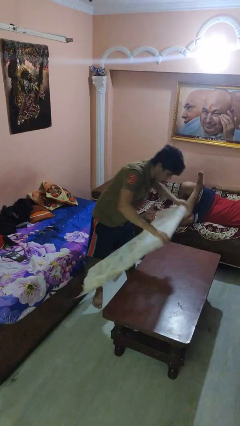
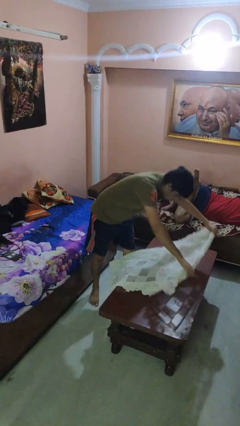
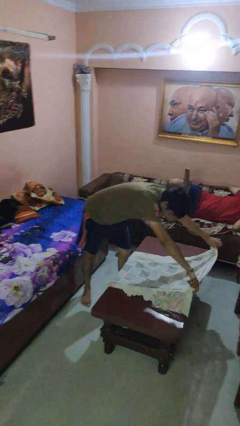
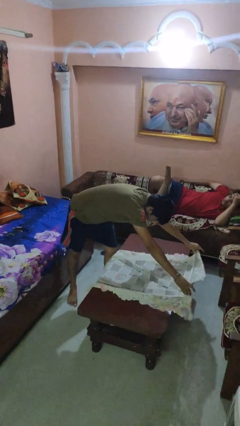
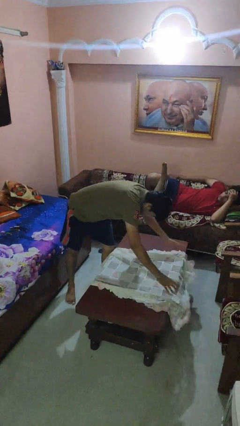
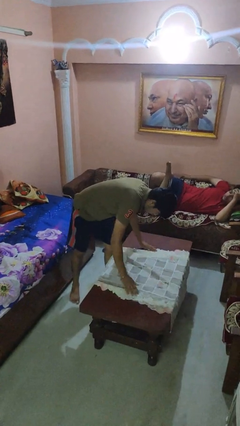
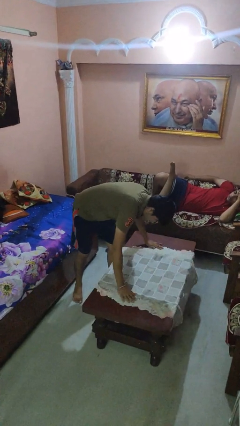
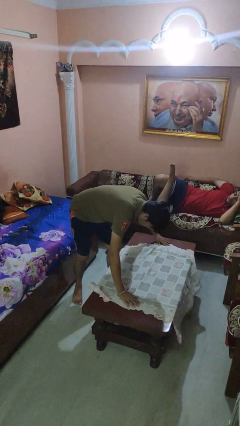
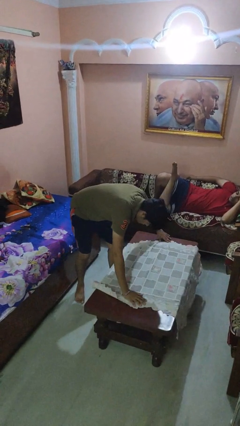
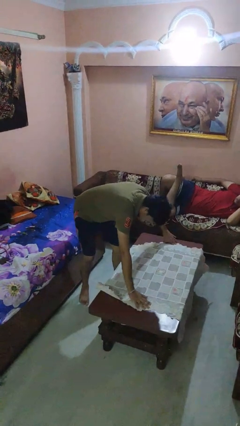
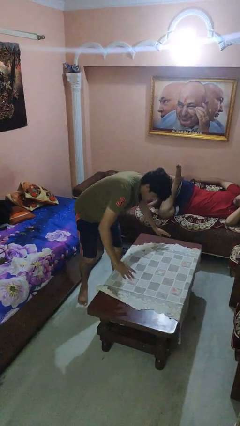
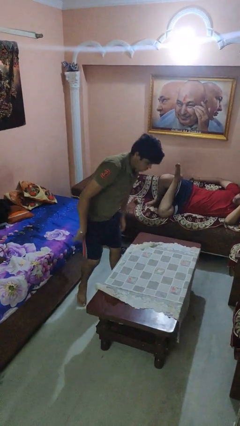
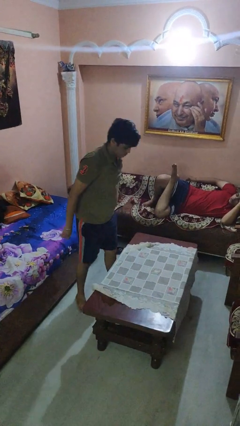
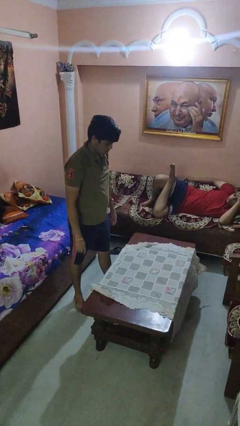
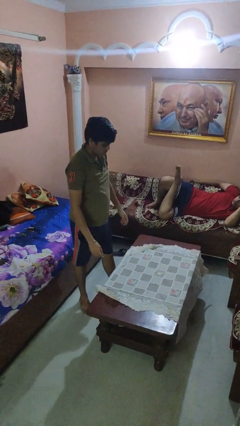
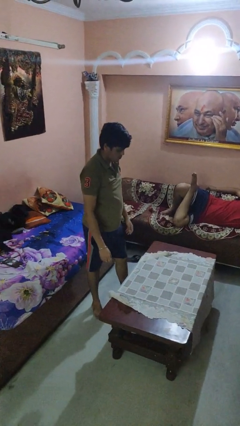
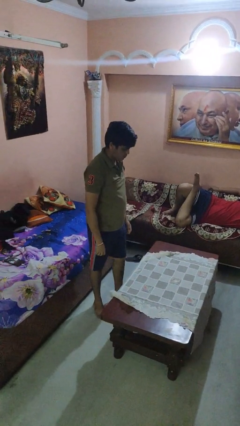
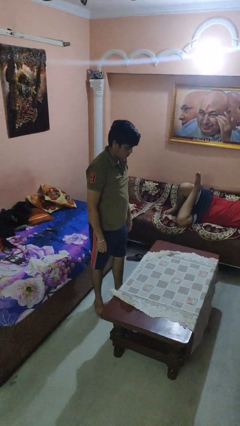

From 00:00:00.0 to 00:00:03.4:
person spreads tablecloth

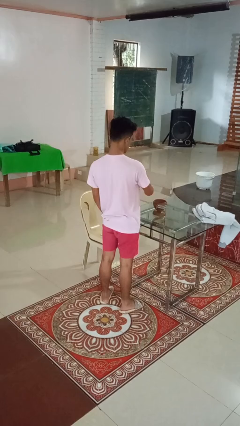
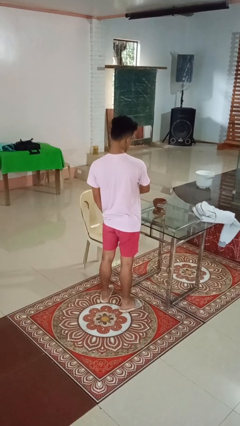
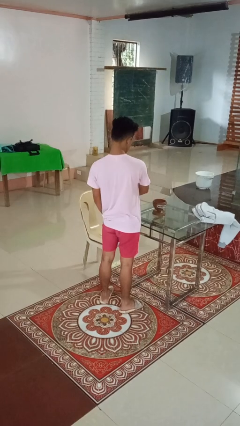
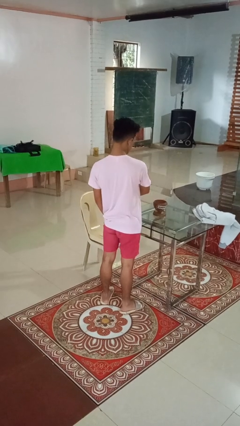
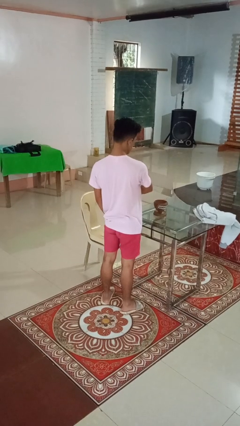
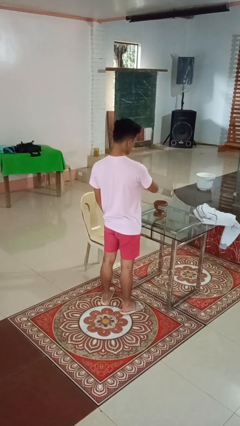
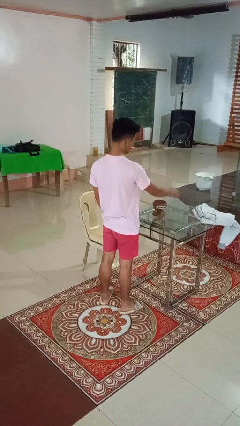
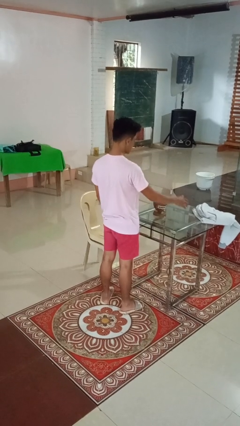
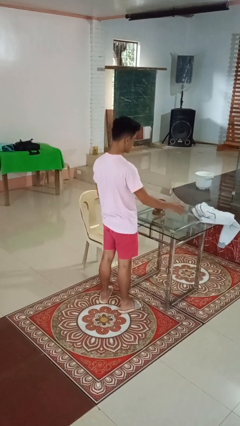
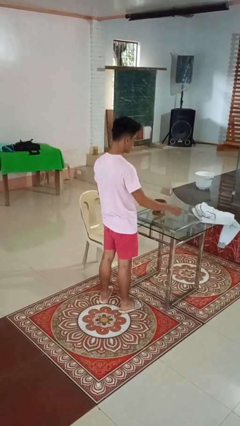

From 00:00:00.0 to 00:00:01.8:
person waves hand over object

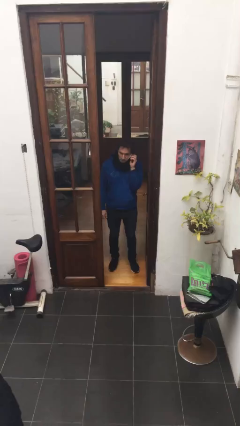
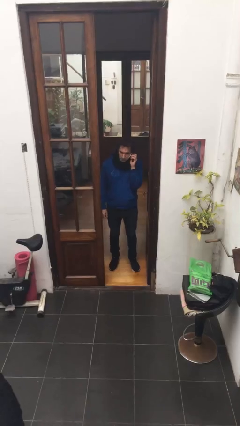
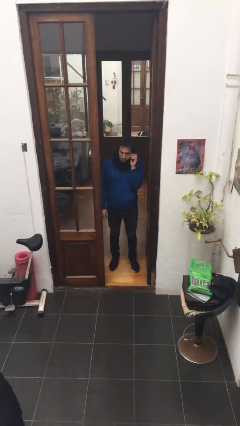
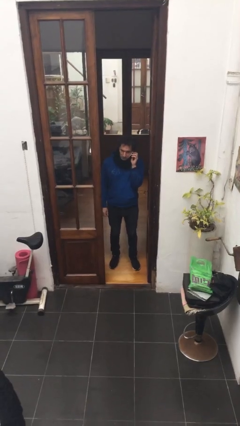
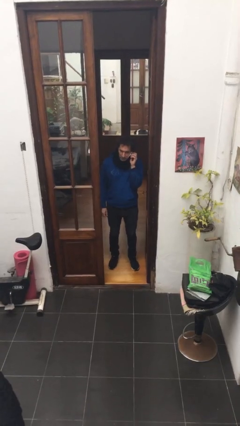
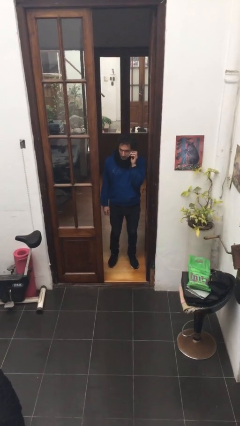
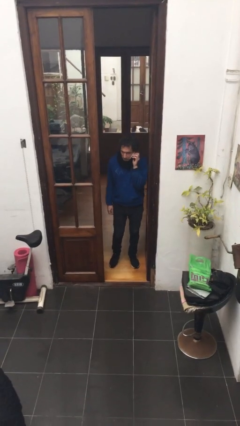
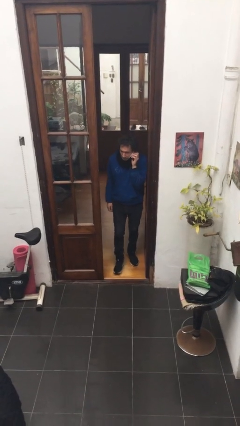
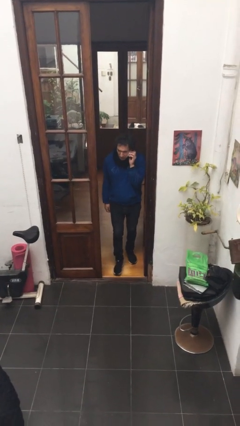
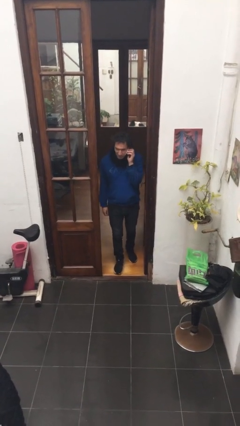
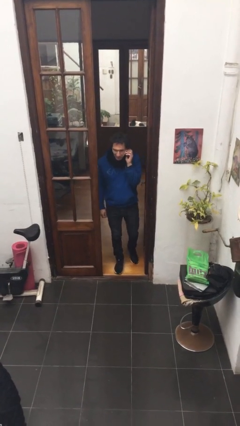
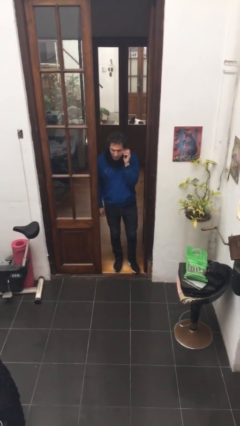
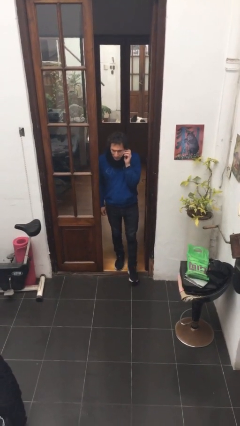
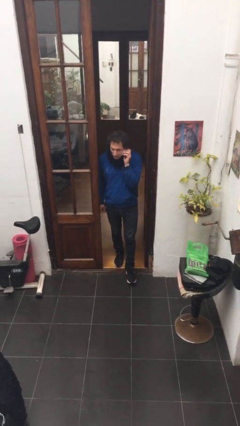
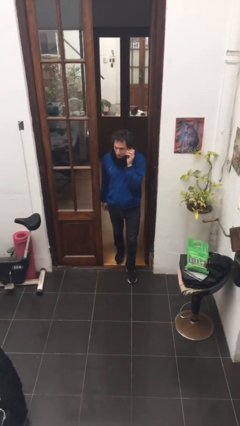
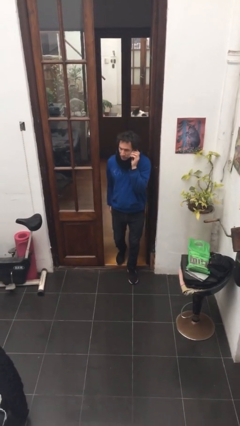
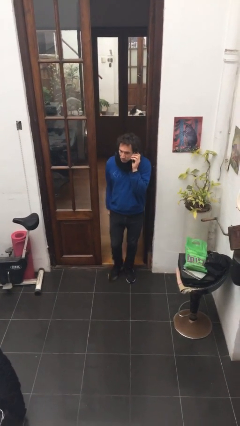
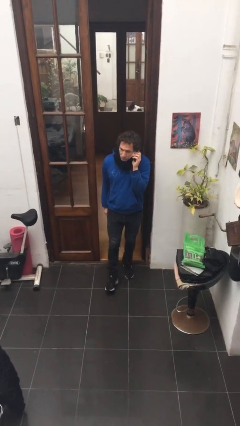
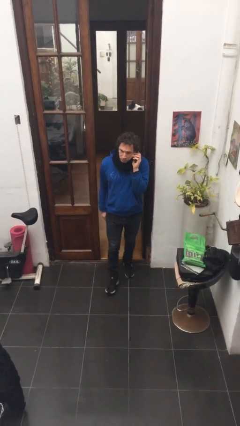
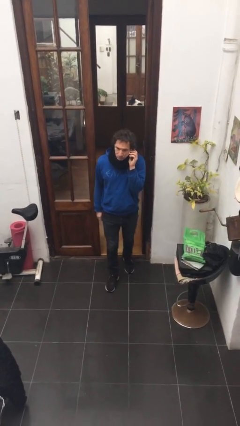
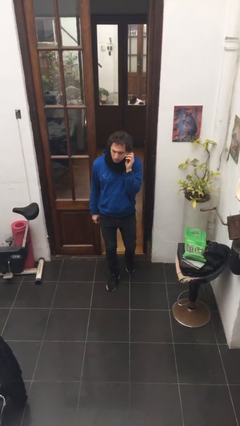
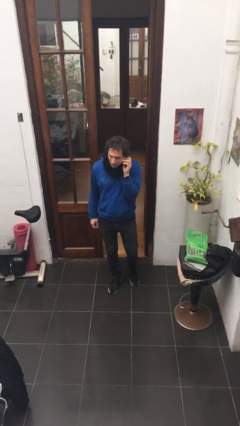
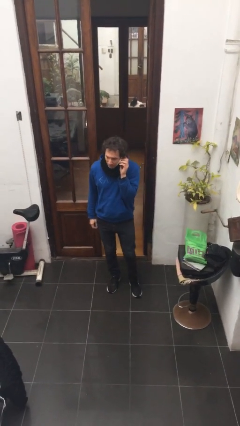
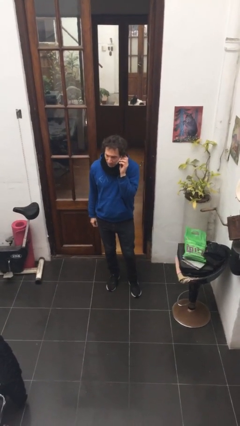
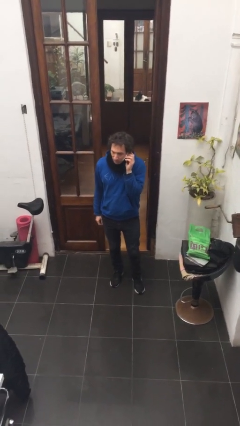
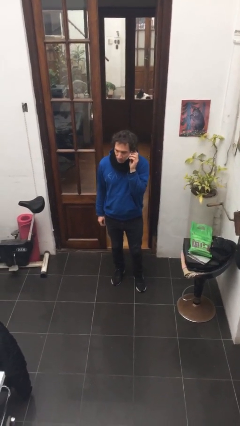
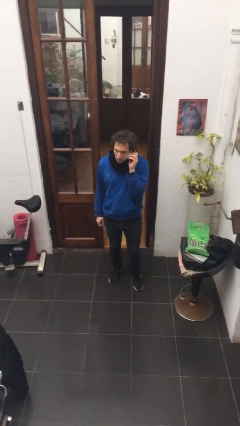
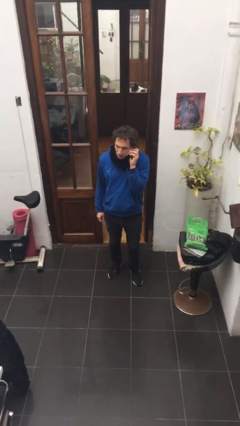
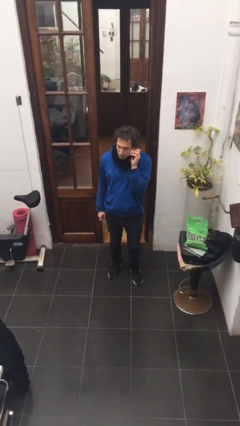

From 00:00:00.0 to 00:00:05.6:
person enters scene through structure

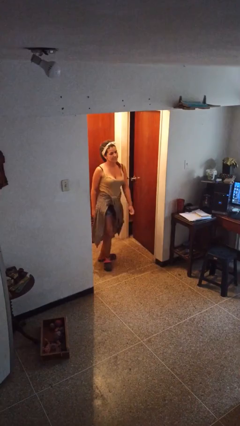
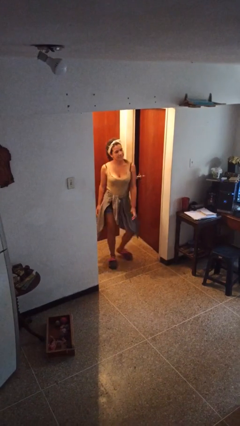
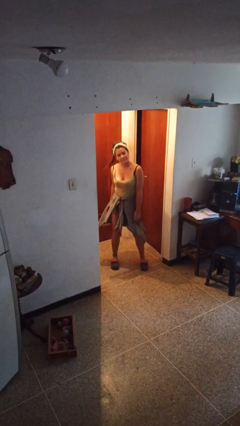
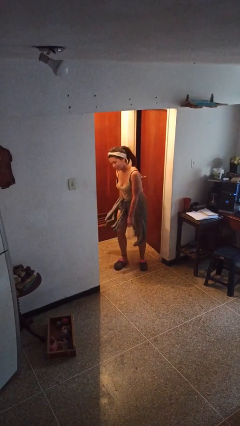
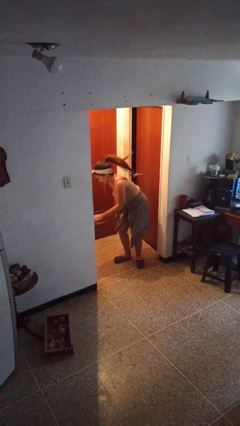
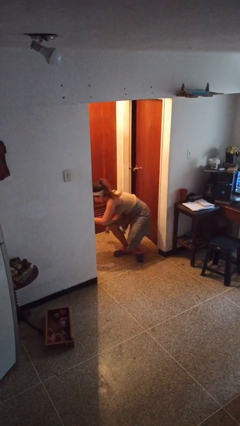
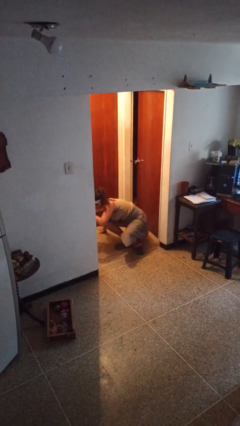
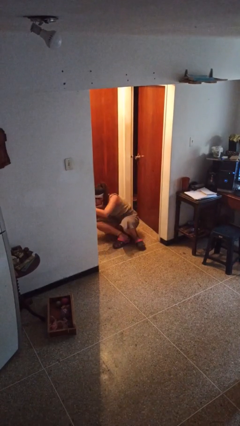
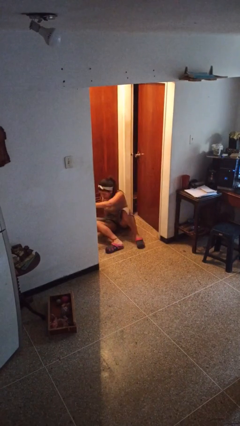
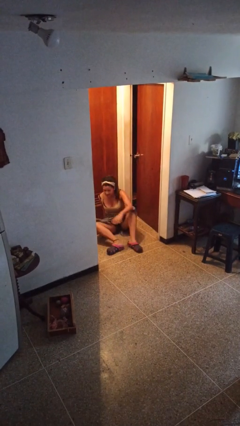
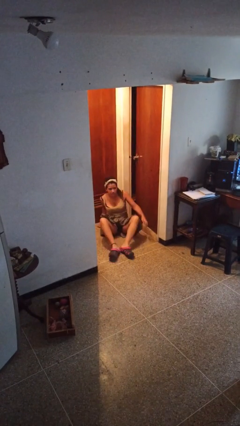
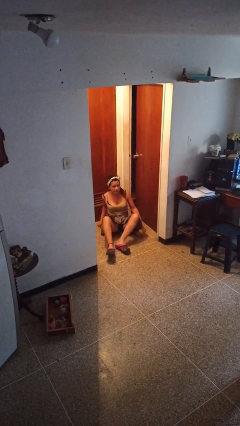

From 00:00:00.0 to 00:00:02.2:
person sits down

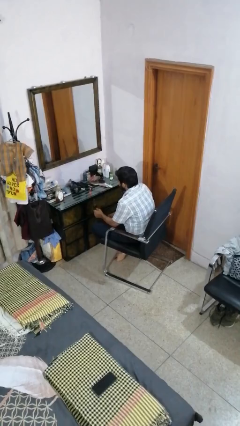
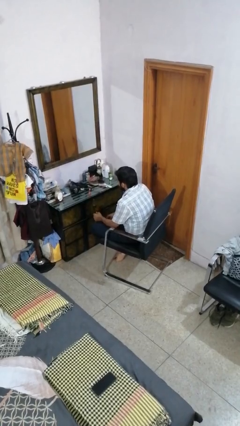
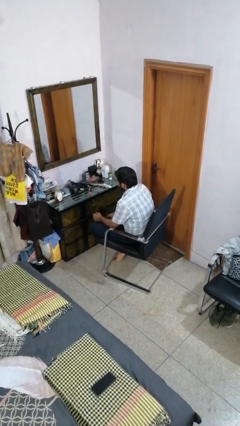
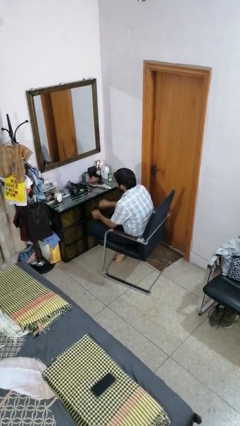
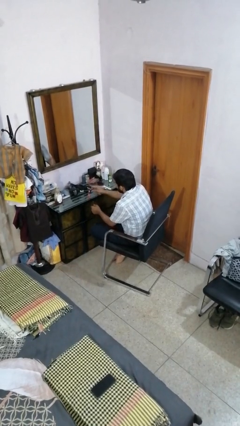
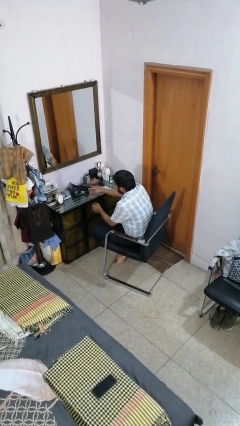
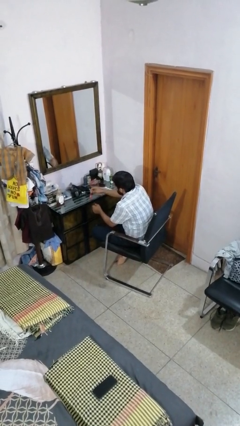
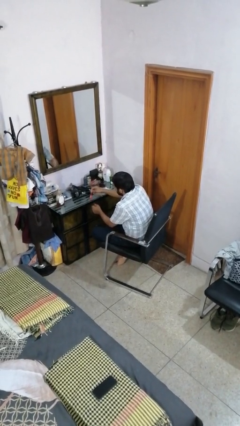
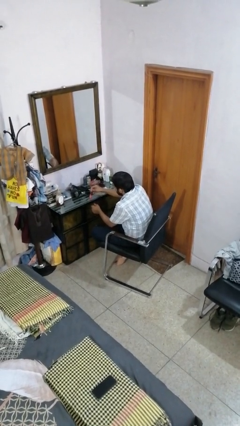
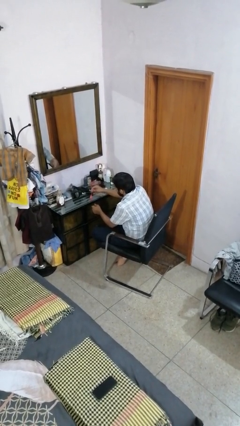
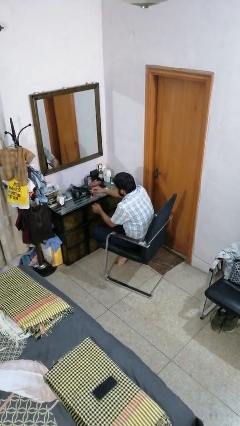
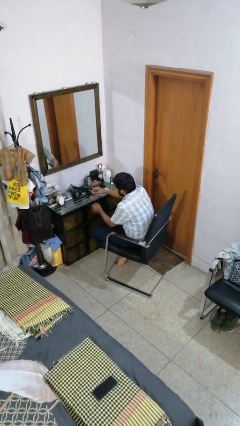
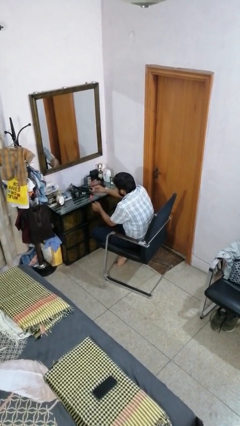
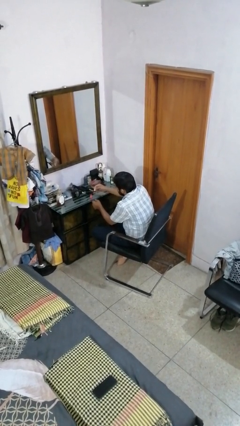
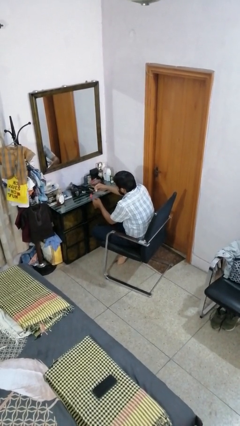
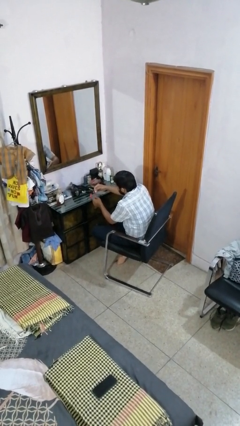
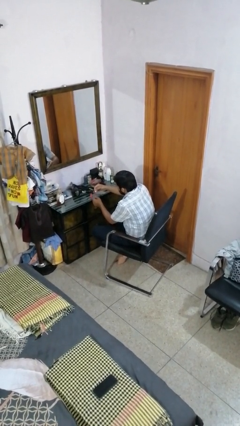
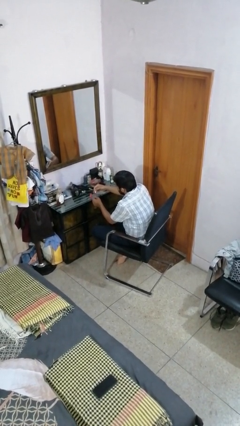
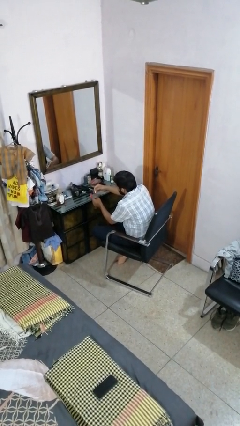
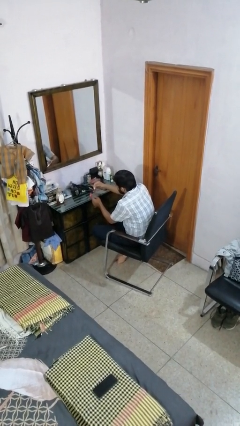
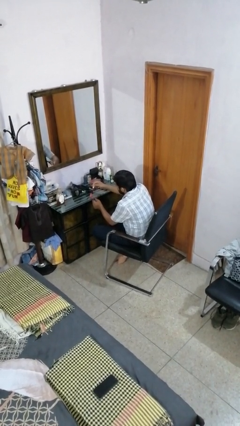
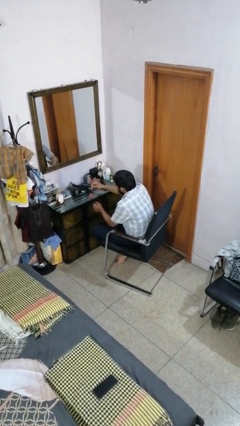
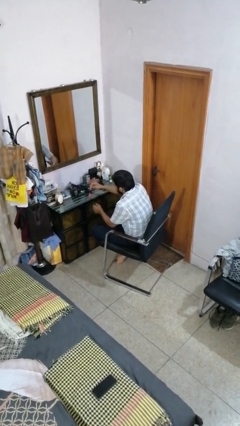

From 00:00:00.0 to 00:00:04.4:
person paints fingernails

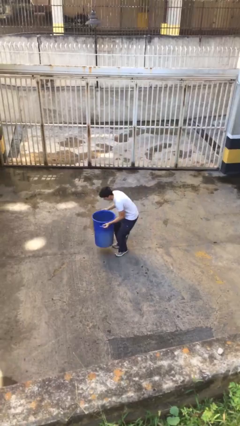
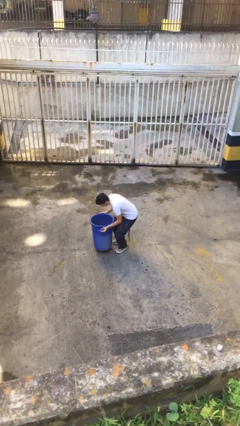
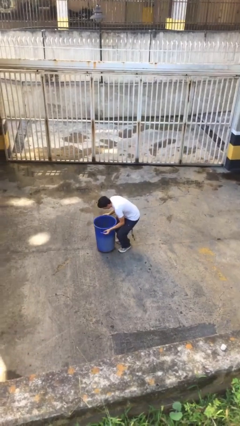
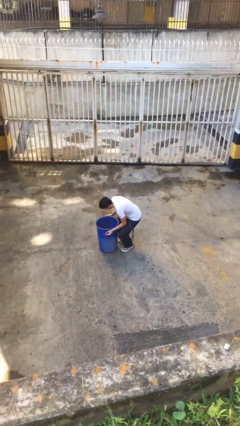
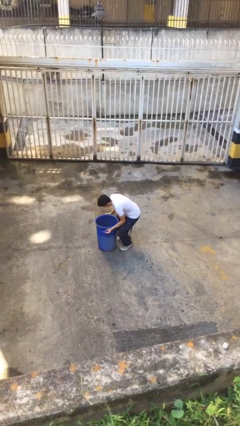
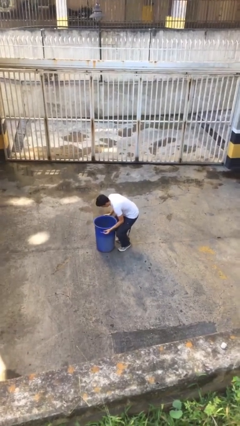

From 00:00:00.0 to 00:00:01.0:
person puts down object on floor
